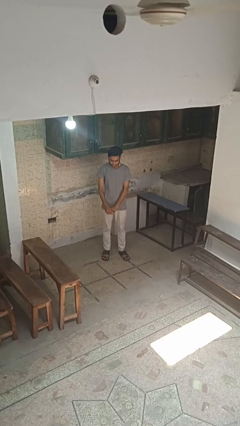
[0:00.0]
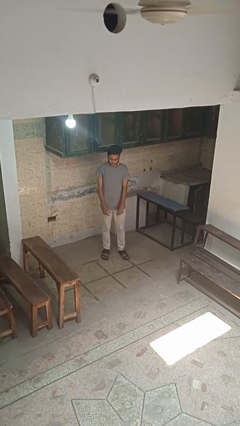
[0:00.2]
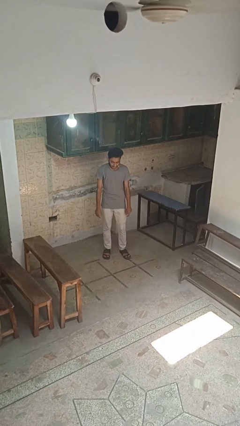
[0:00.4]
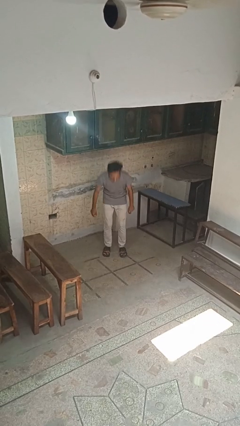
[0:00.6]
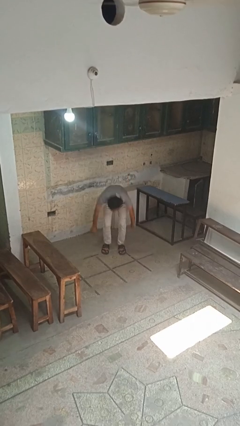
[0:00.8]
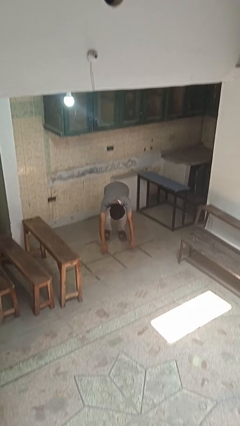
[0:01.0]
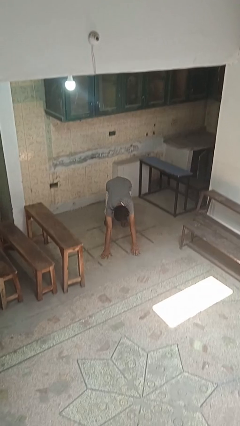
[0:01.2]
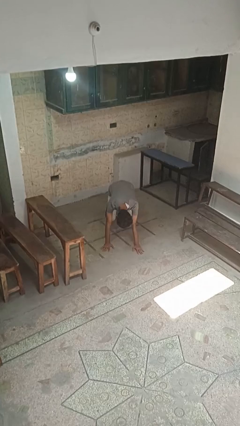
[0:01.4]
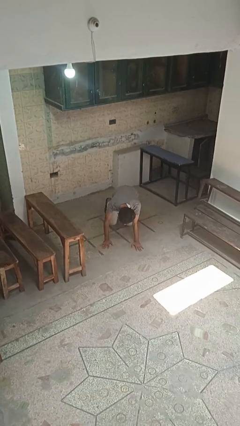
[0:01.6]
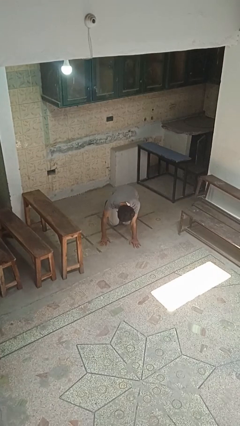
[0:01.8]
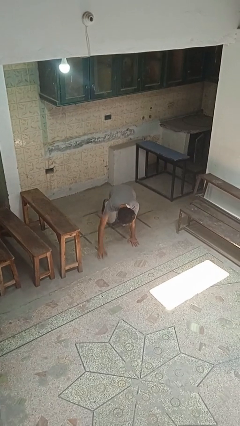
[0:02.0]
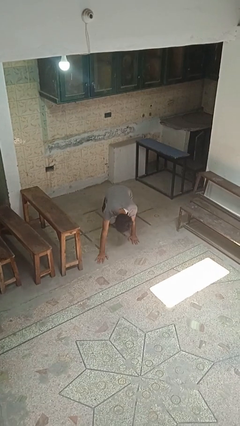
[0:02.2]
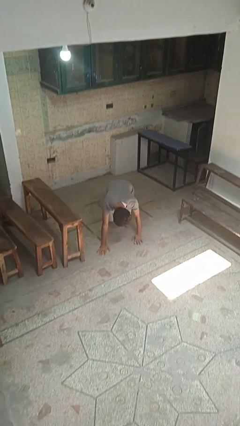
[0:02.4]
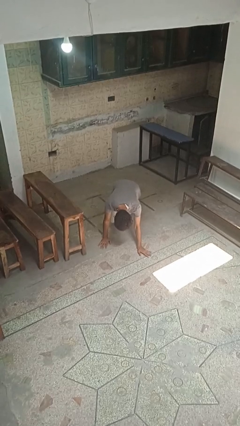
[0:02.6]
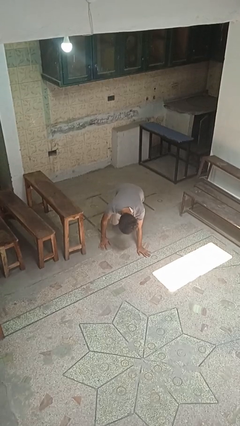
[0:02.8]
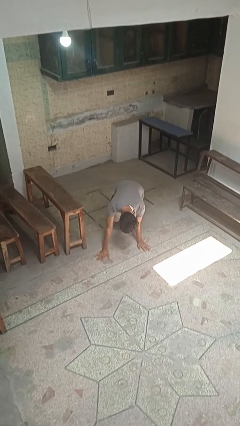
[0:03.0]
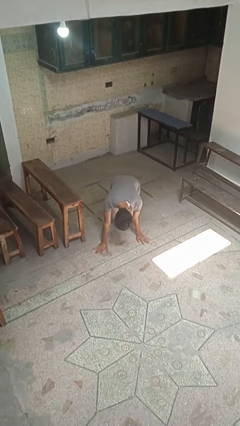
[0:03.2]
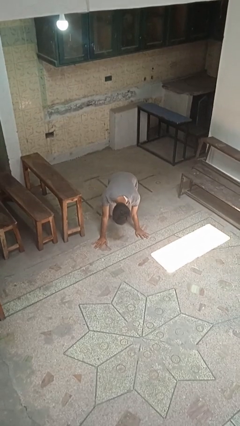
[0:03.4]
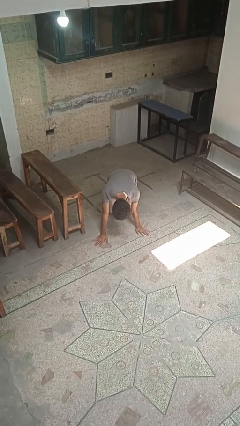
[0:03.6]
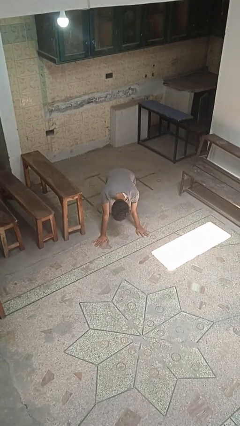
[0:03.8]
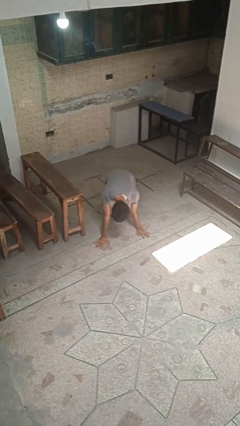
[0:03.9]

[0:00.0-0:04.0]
person crawls

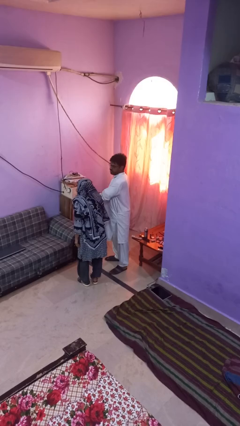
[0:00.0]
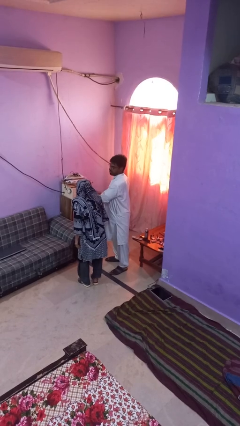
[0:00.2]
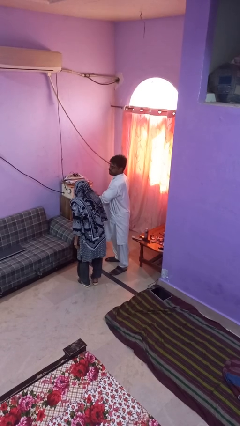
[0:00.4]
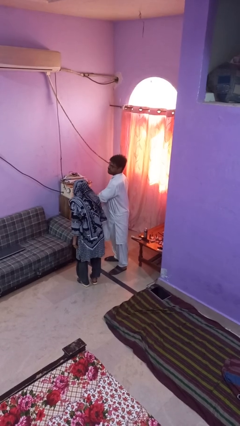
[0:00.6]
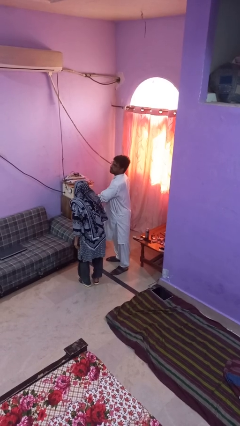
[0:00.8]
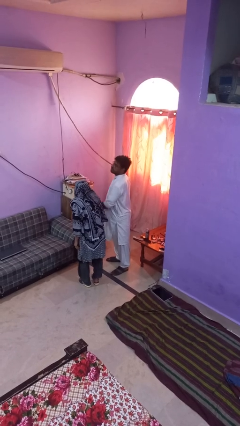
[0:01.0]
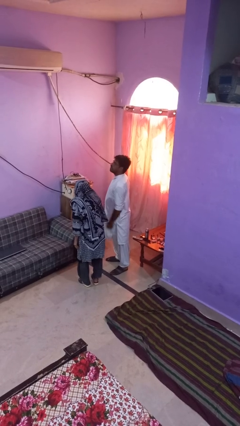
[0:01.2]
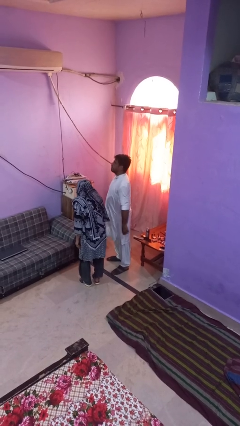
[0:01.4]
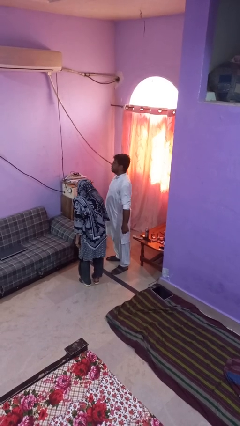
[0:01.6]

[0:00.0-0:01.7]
person nudges person with elbow

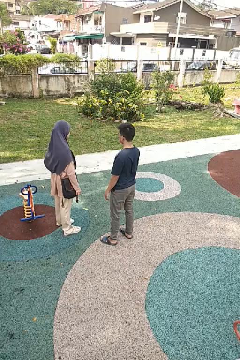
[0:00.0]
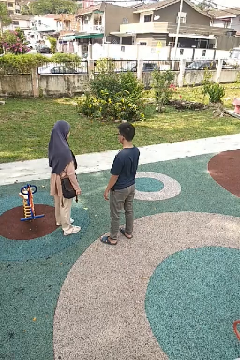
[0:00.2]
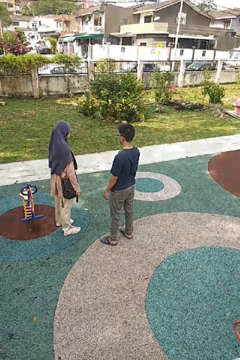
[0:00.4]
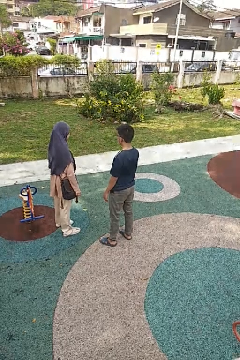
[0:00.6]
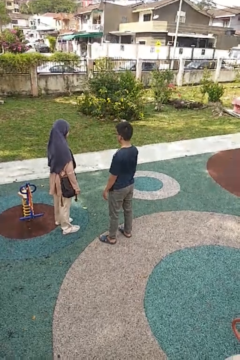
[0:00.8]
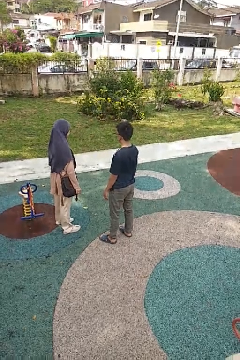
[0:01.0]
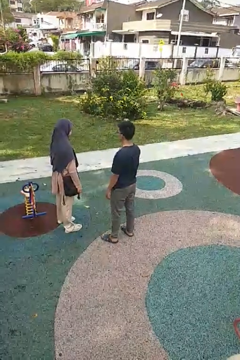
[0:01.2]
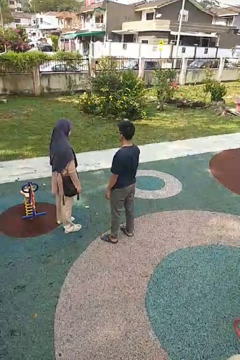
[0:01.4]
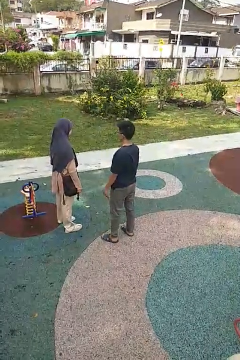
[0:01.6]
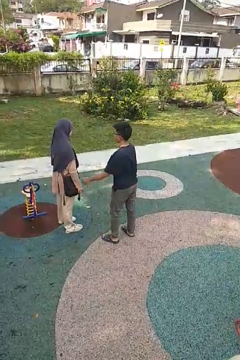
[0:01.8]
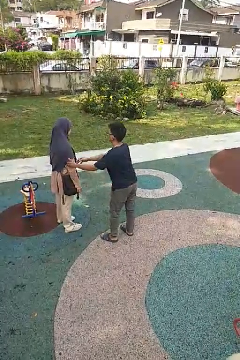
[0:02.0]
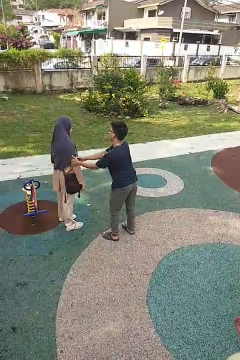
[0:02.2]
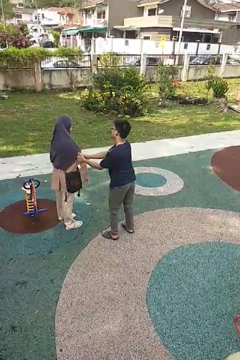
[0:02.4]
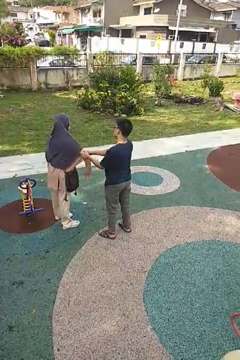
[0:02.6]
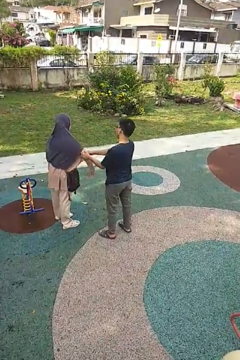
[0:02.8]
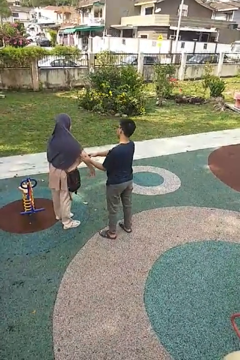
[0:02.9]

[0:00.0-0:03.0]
person grabs person by bicep

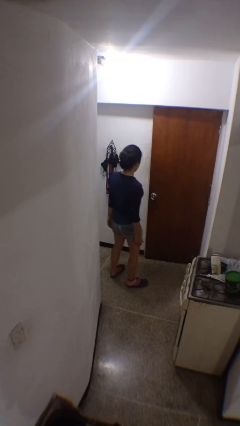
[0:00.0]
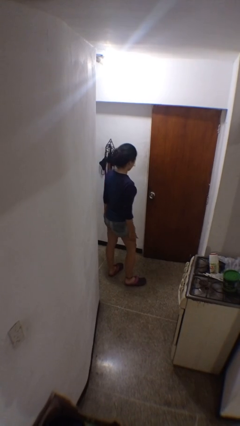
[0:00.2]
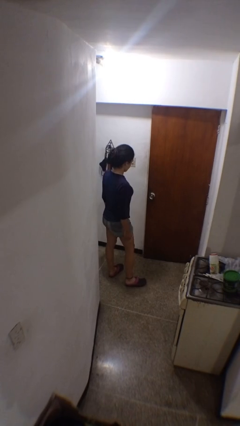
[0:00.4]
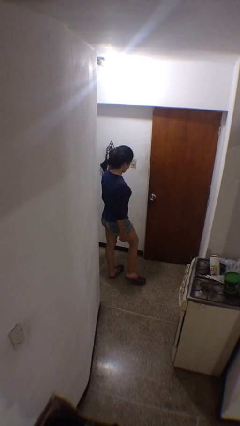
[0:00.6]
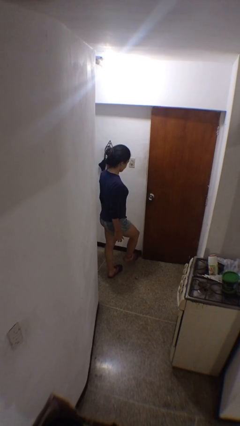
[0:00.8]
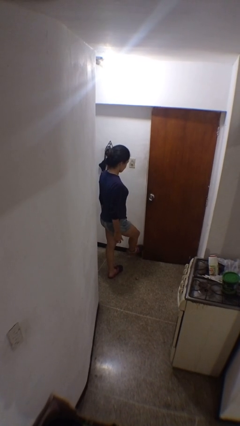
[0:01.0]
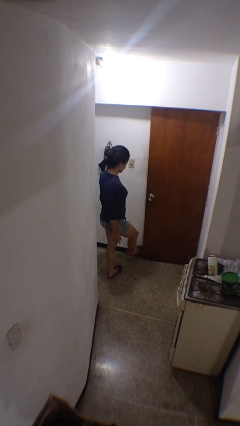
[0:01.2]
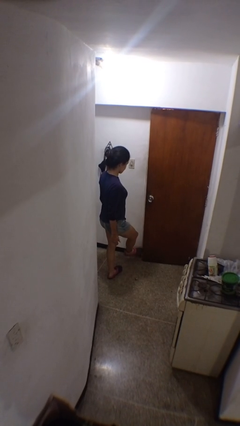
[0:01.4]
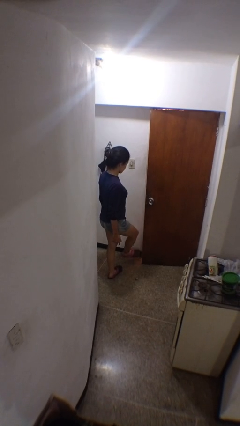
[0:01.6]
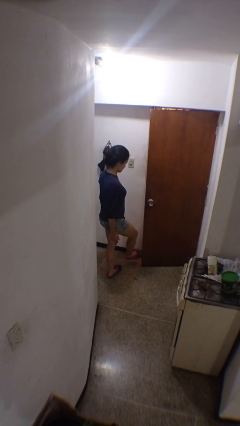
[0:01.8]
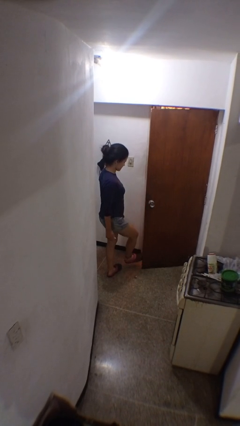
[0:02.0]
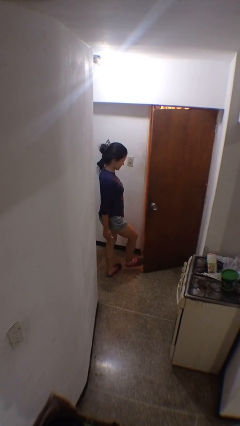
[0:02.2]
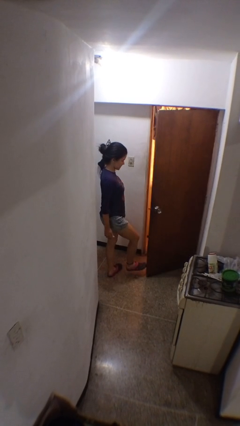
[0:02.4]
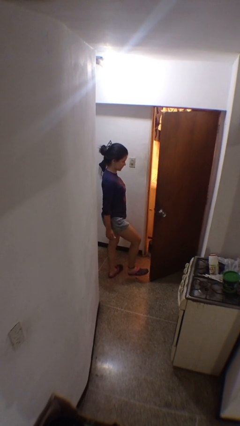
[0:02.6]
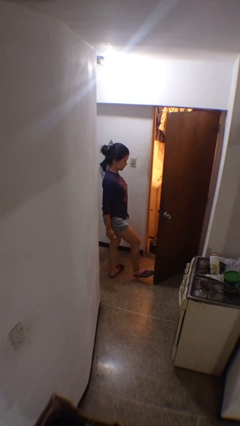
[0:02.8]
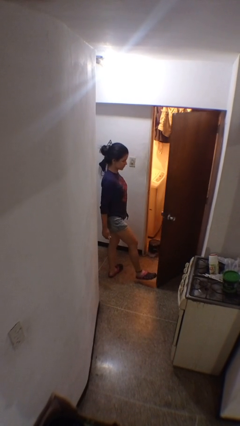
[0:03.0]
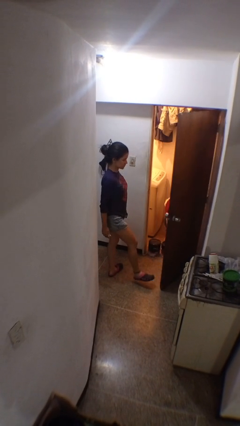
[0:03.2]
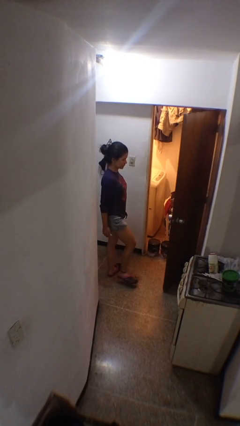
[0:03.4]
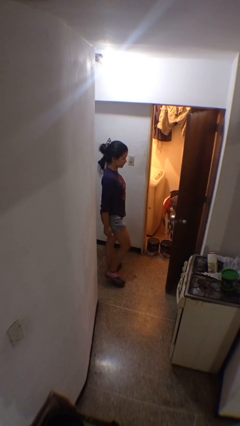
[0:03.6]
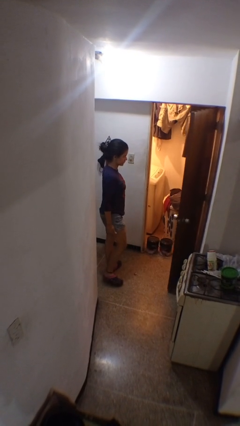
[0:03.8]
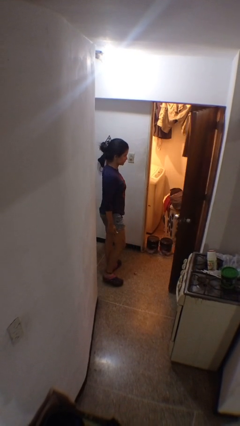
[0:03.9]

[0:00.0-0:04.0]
person opens facility door

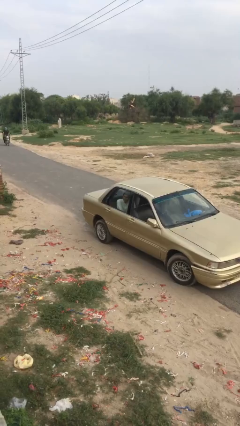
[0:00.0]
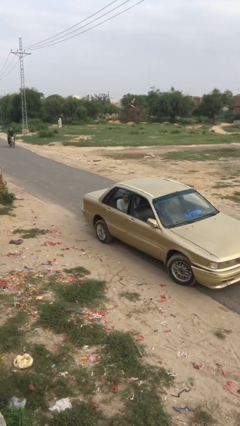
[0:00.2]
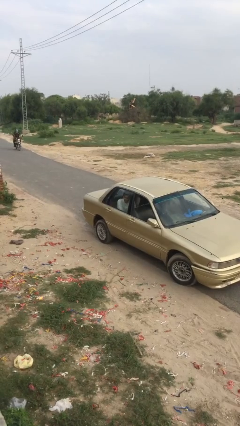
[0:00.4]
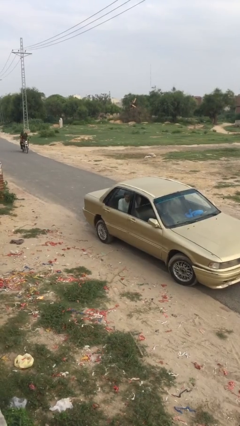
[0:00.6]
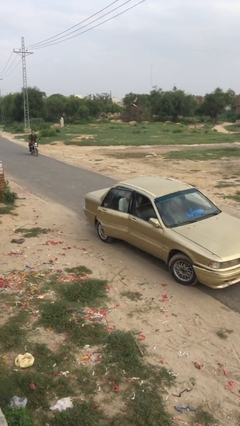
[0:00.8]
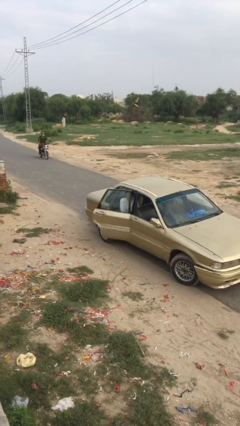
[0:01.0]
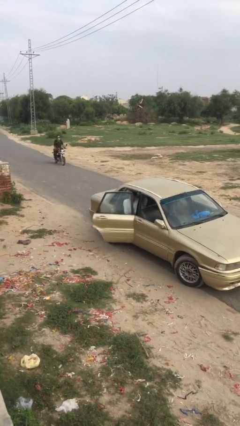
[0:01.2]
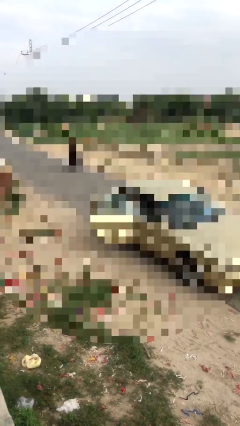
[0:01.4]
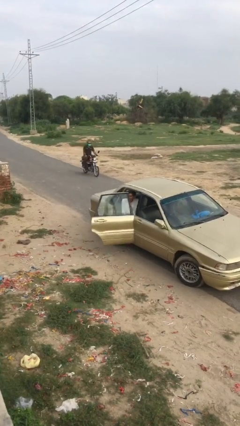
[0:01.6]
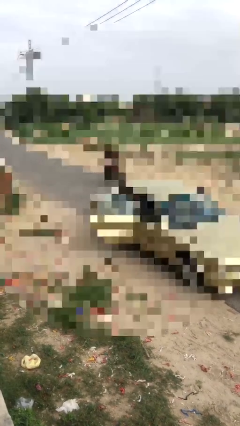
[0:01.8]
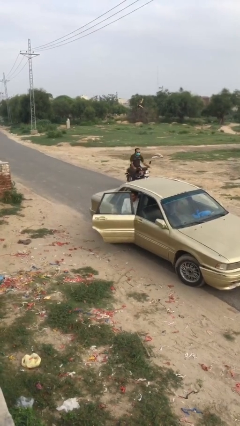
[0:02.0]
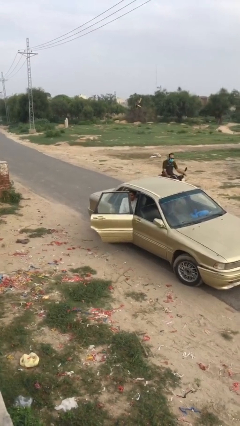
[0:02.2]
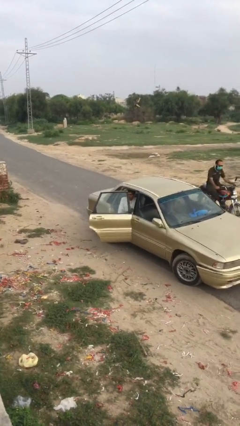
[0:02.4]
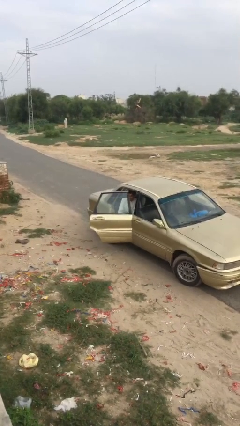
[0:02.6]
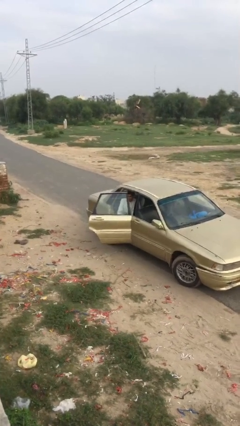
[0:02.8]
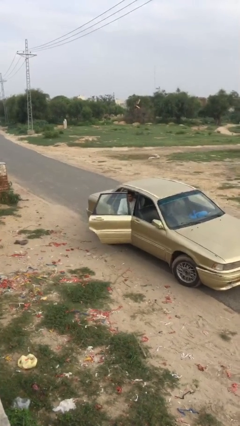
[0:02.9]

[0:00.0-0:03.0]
person opens car door

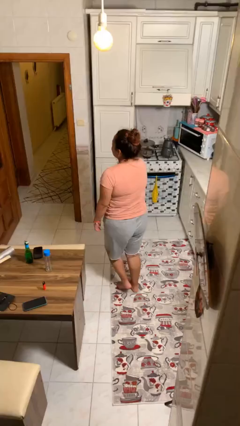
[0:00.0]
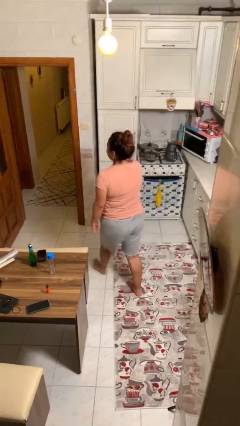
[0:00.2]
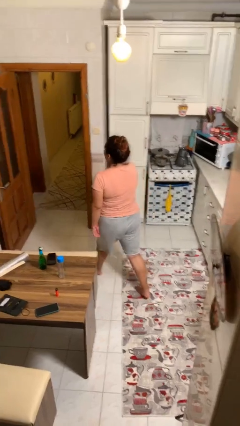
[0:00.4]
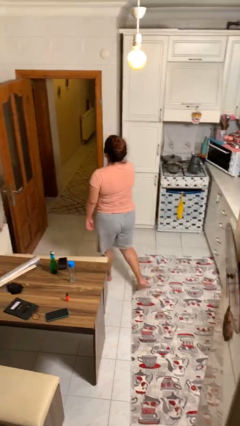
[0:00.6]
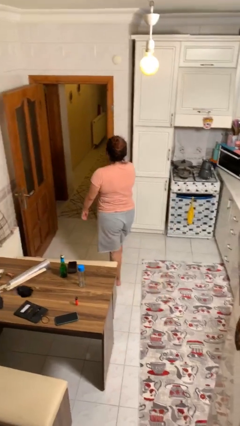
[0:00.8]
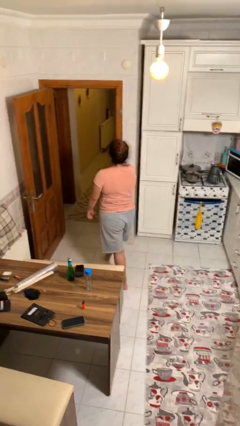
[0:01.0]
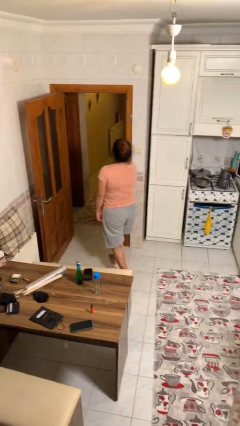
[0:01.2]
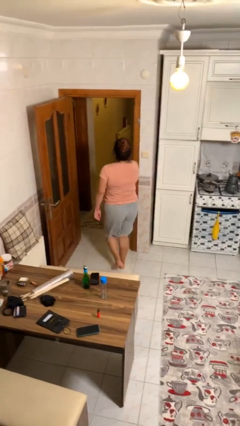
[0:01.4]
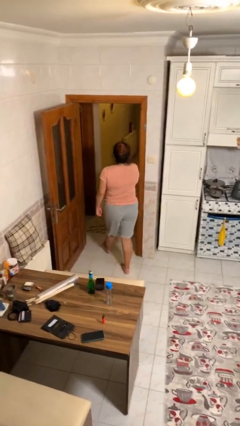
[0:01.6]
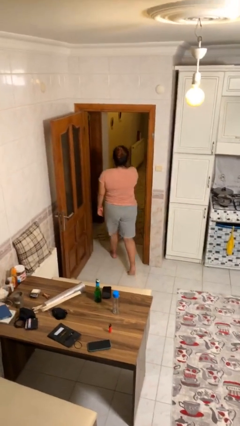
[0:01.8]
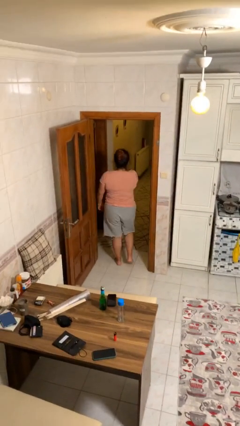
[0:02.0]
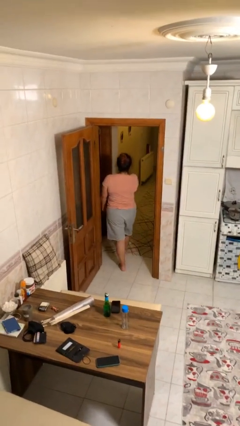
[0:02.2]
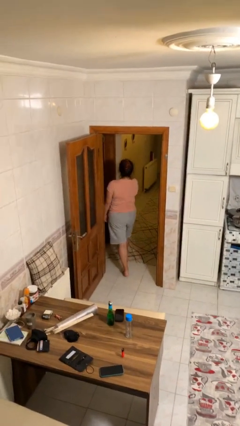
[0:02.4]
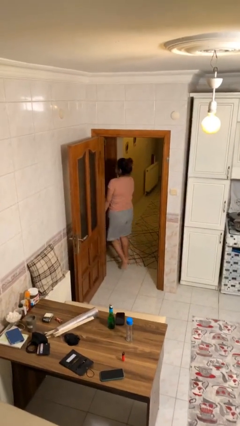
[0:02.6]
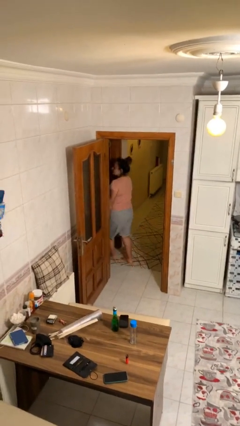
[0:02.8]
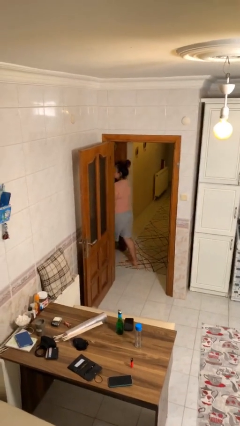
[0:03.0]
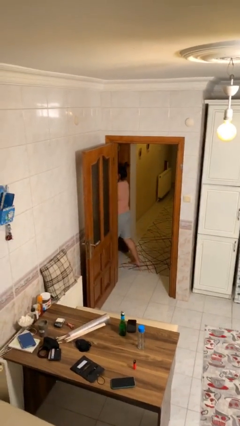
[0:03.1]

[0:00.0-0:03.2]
person exits scene through structure
